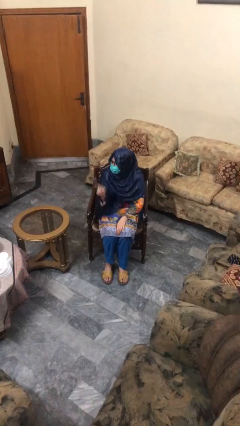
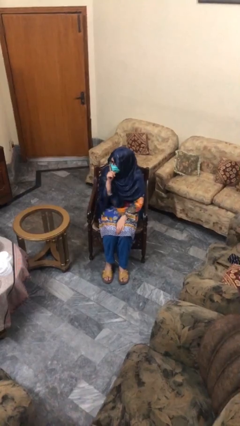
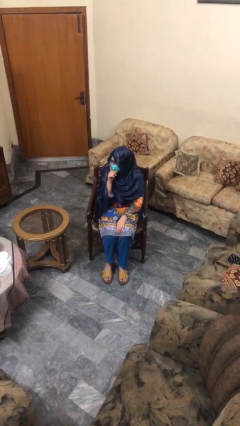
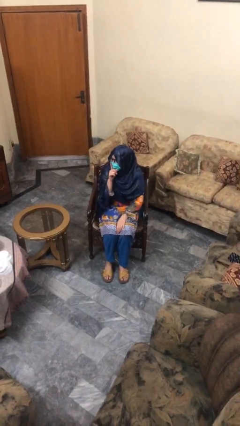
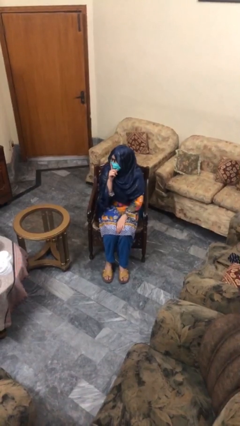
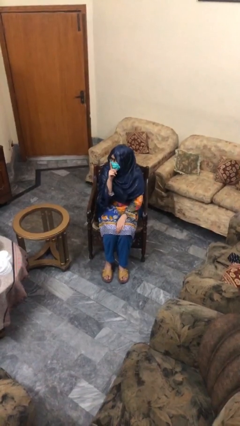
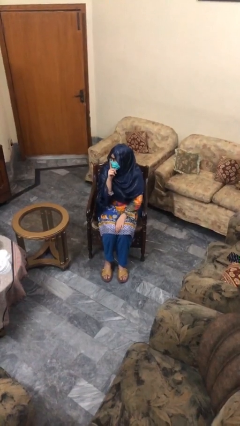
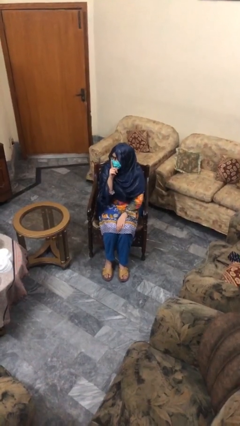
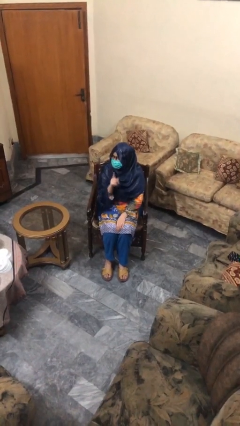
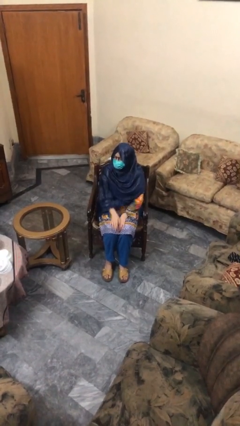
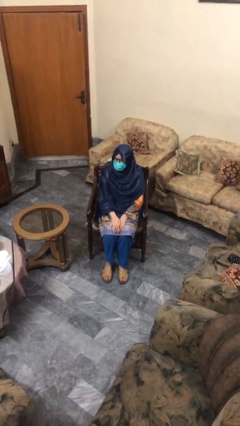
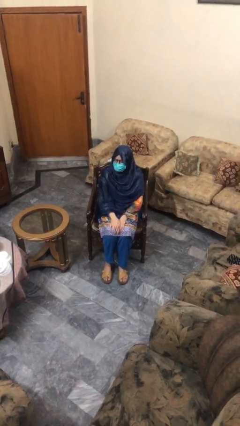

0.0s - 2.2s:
person gestures be quiet

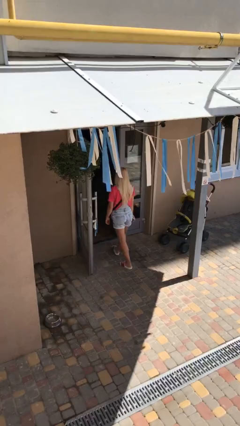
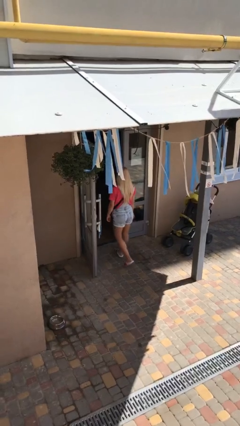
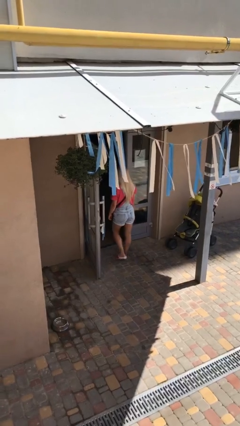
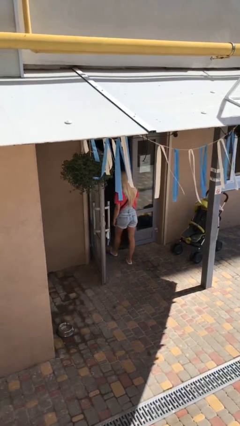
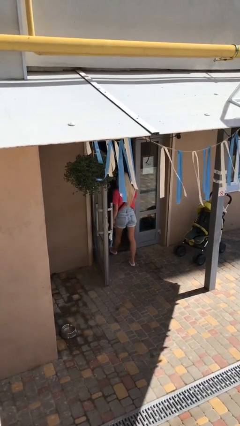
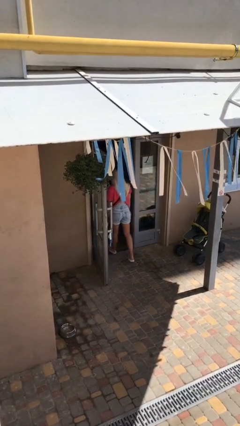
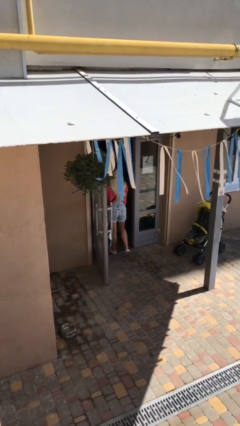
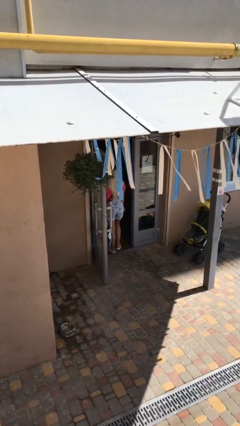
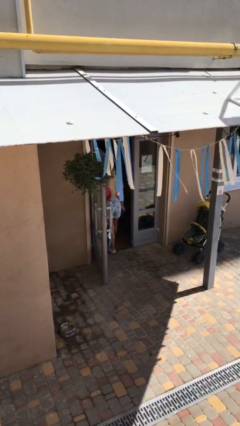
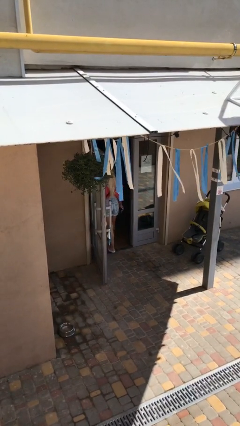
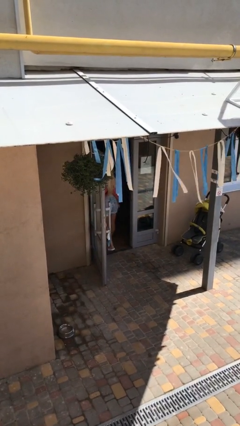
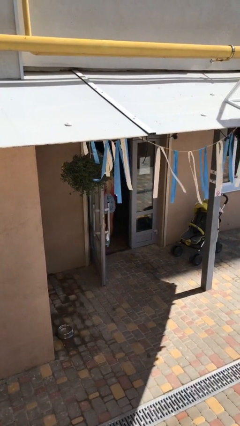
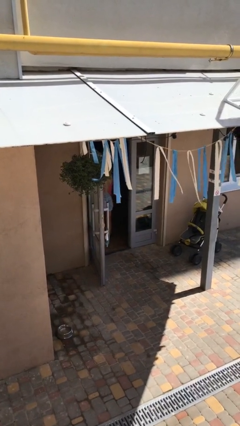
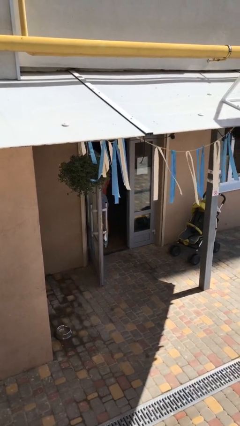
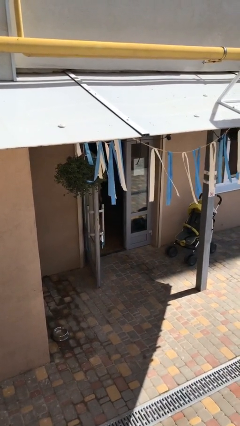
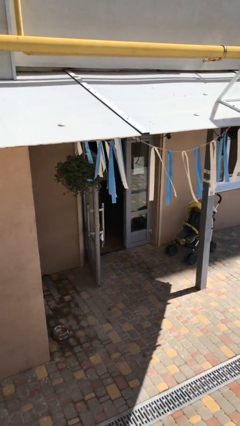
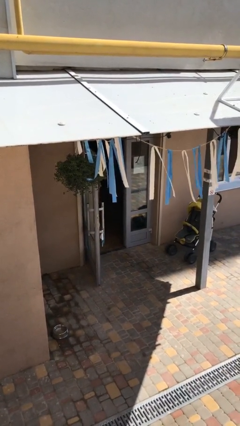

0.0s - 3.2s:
person exits scene through structure

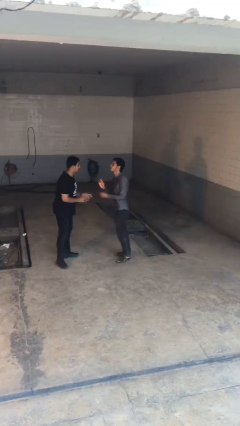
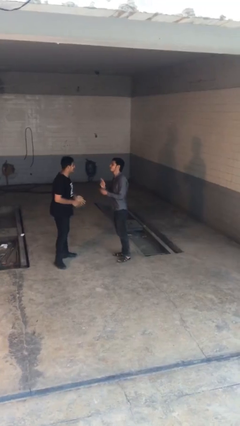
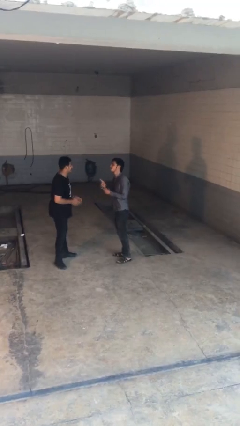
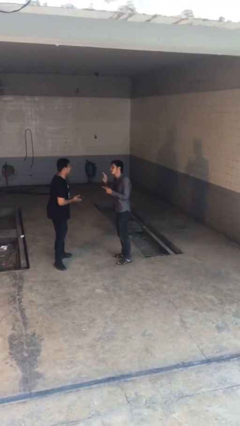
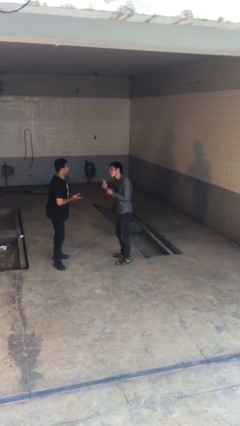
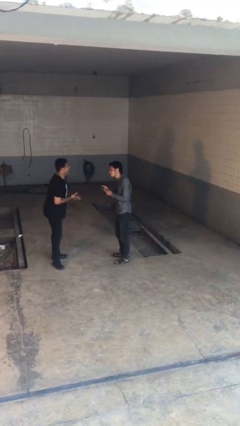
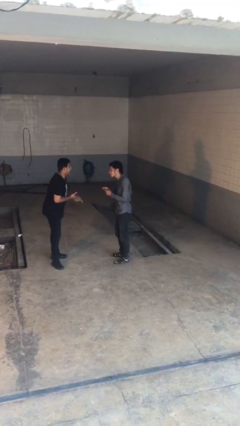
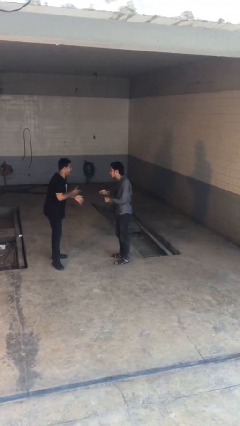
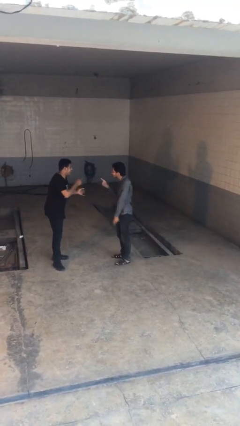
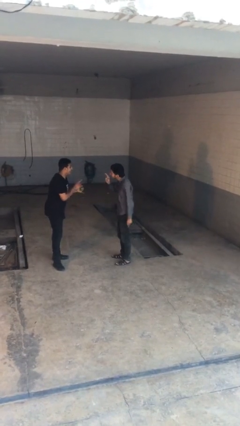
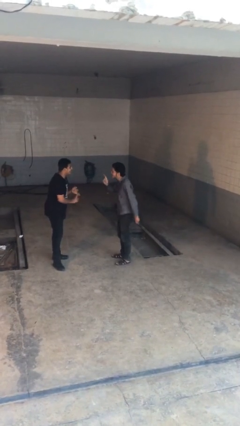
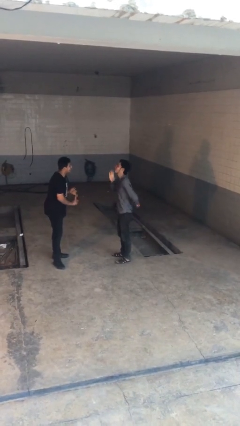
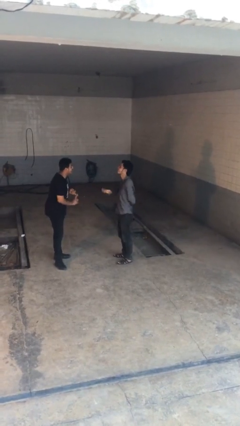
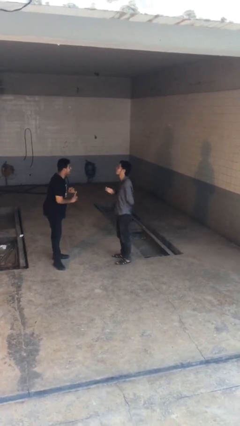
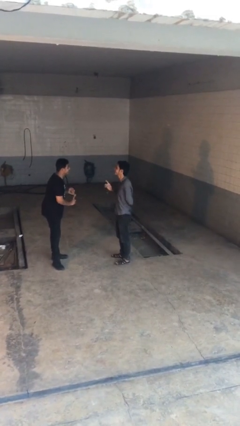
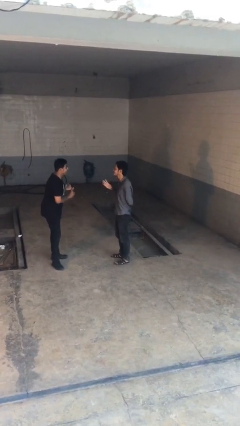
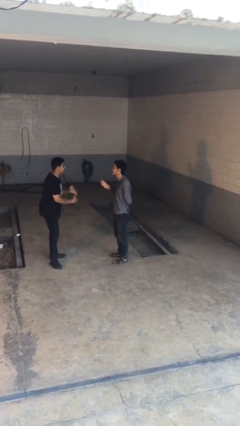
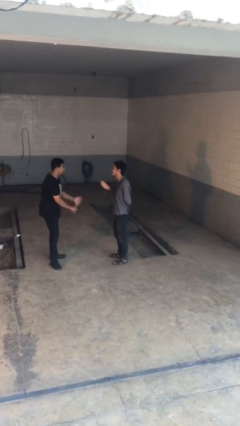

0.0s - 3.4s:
person talks to person

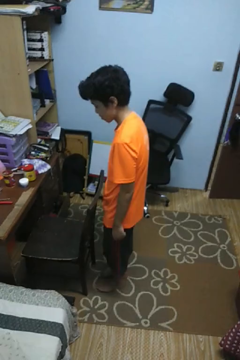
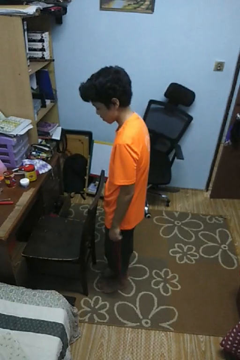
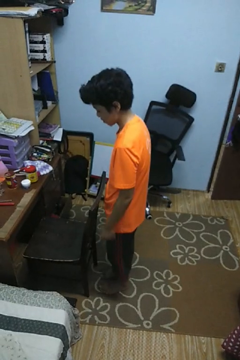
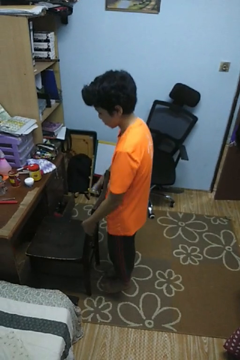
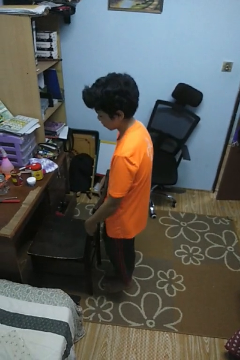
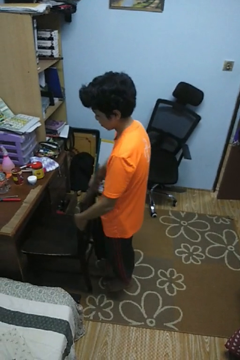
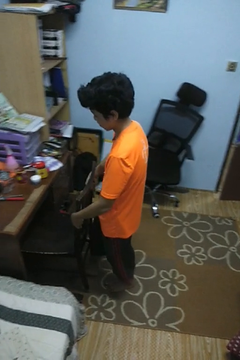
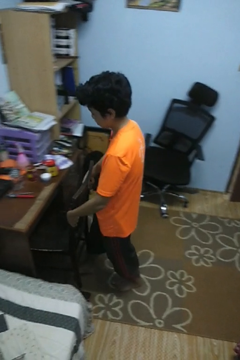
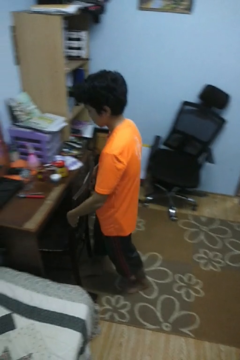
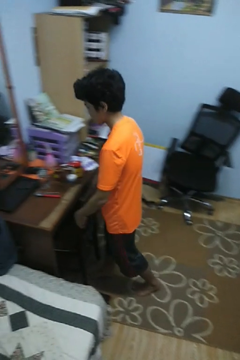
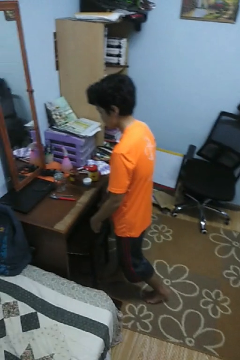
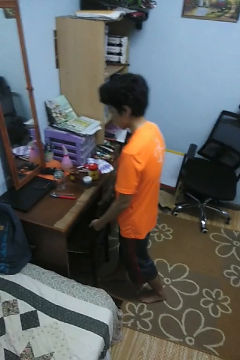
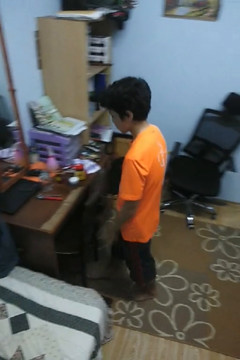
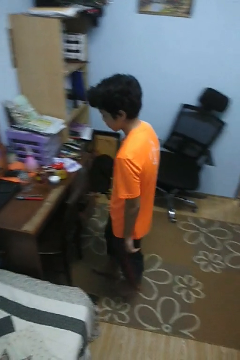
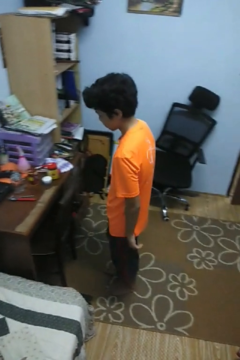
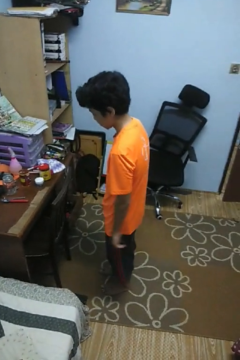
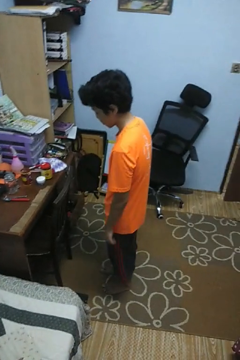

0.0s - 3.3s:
person pushes in chair

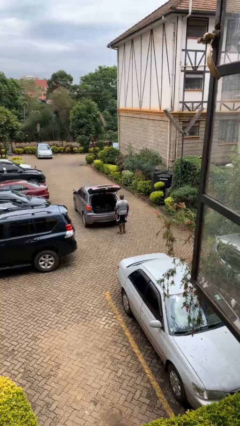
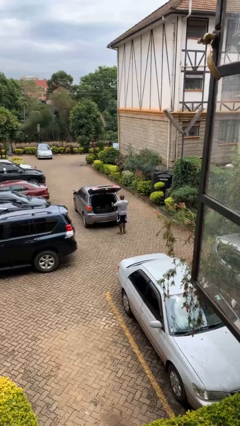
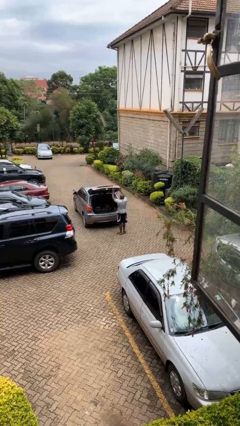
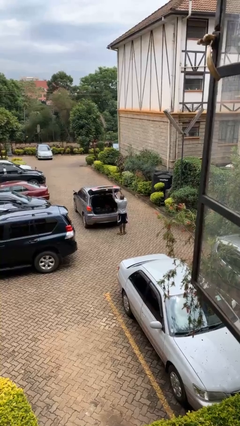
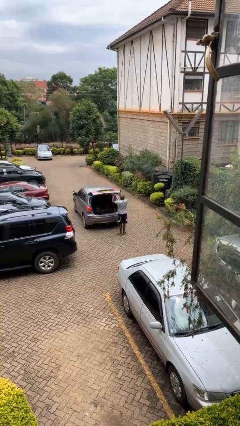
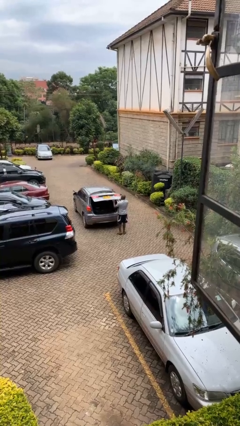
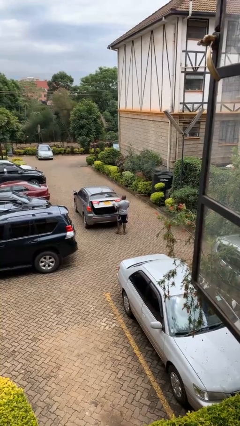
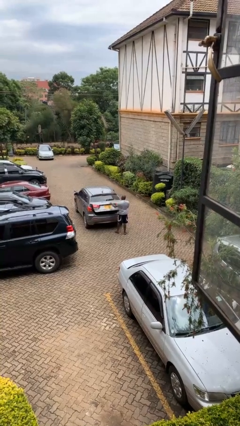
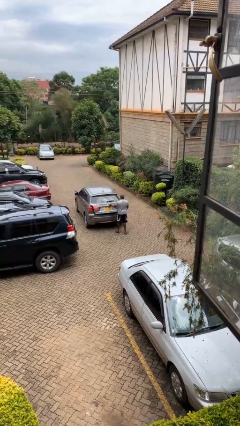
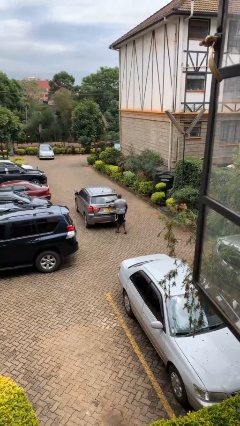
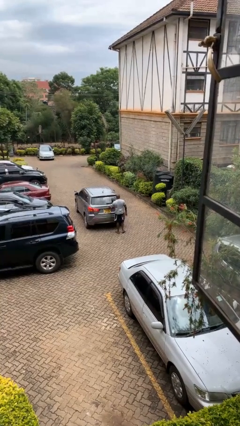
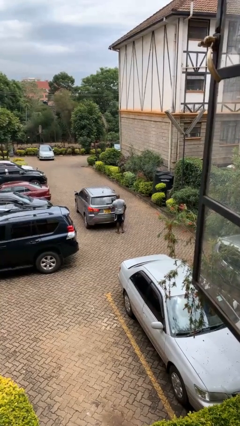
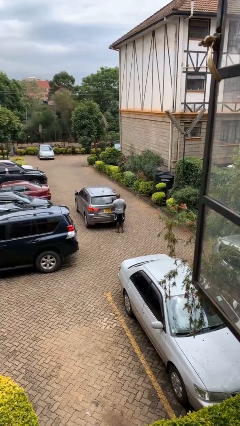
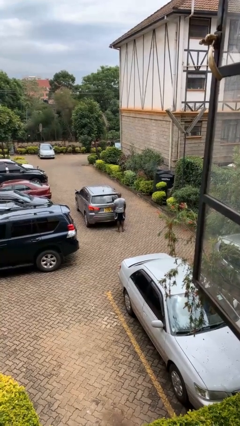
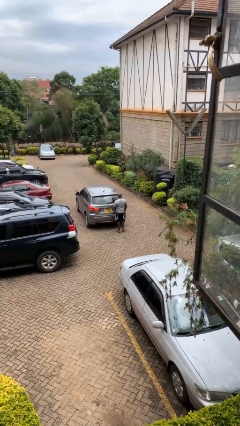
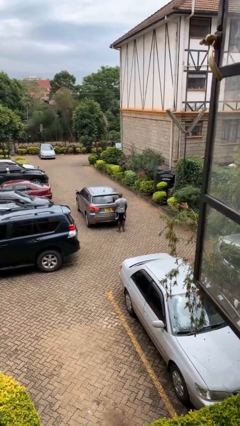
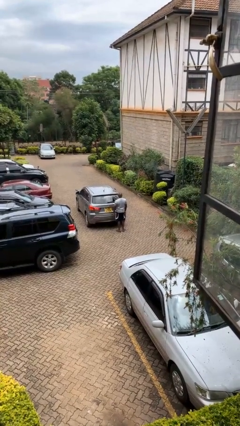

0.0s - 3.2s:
person closes car trunk

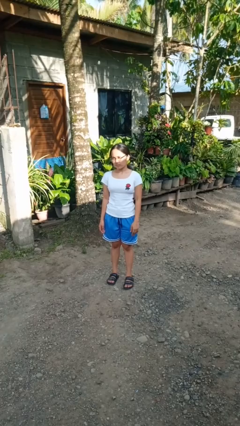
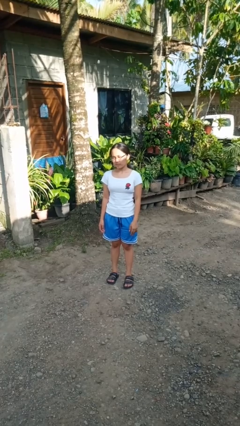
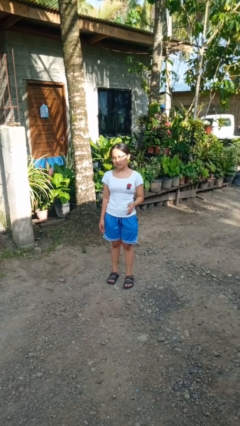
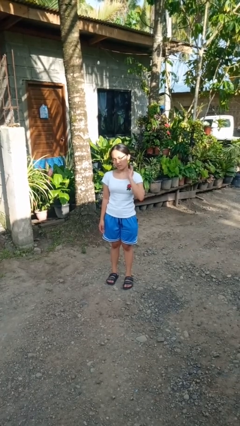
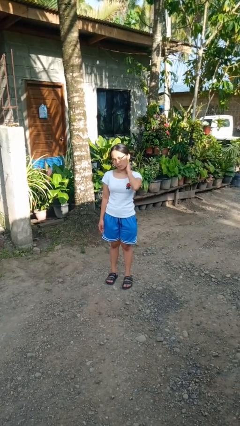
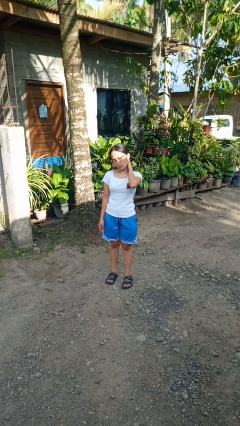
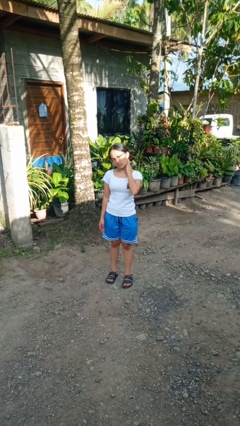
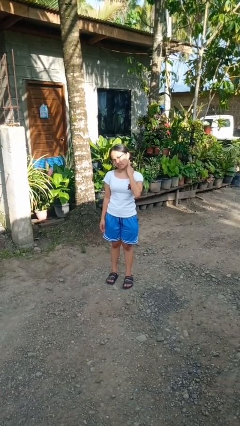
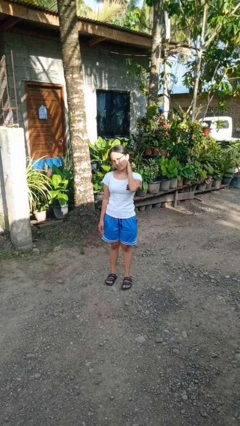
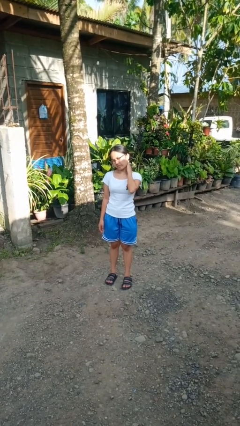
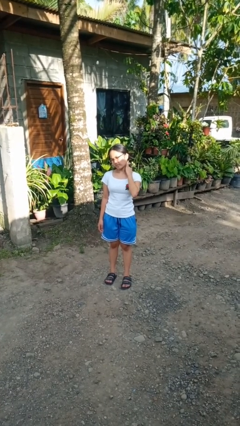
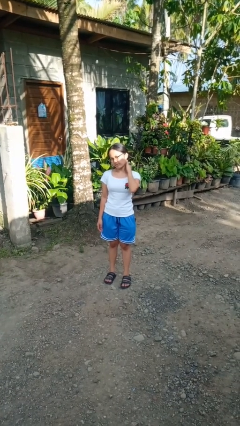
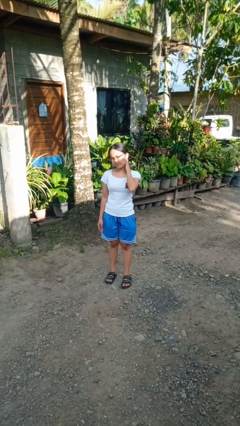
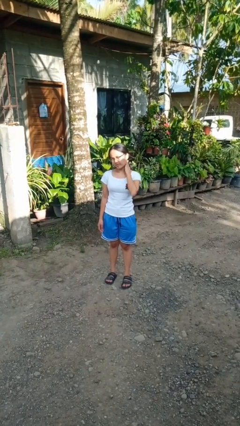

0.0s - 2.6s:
person rubs neck

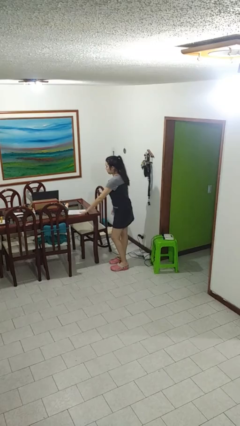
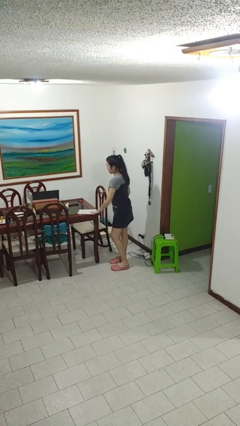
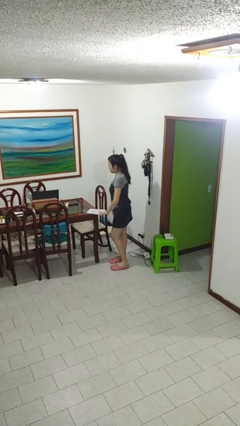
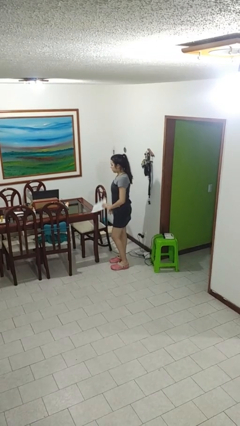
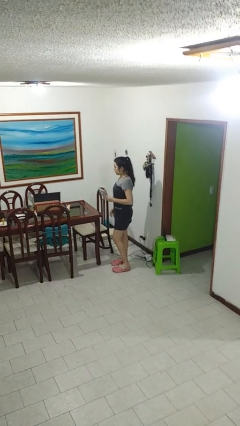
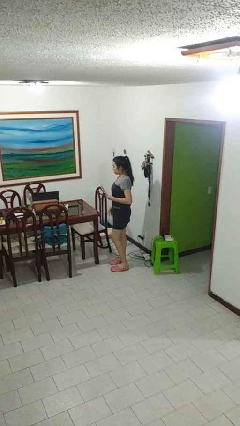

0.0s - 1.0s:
person picks up object from table
